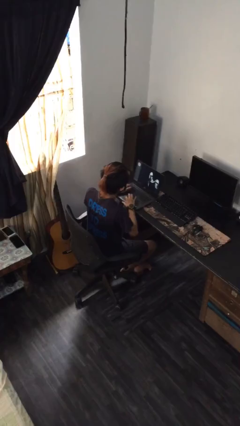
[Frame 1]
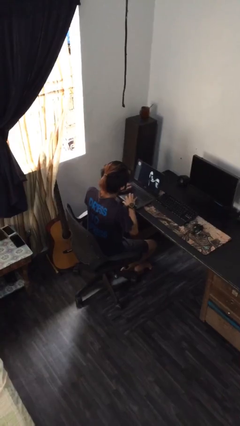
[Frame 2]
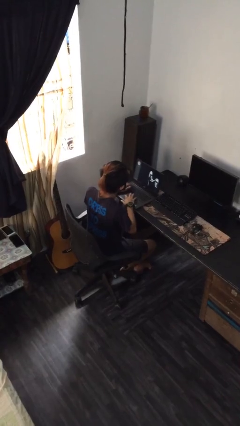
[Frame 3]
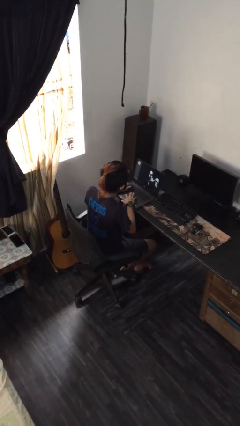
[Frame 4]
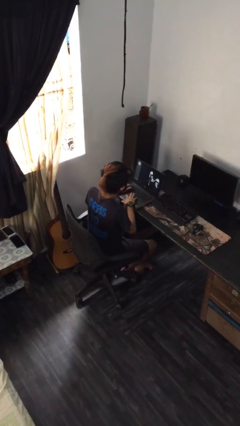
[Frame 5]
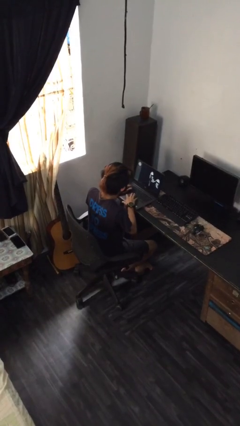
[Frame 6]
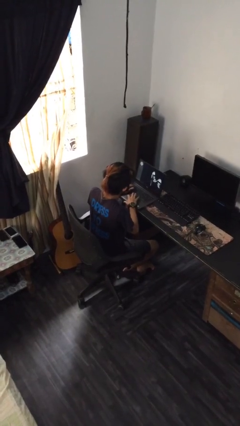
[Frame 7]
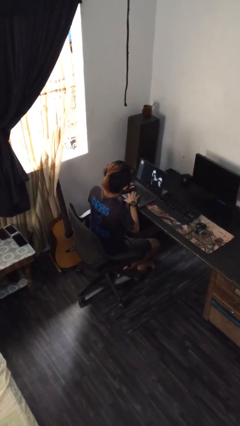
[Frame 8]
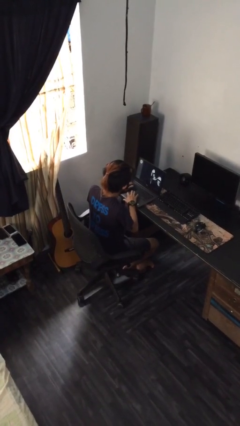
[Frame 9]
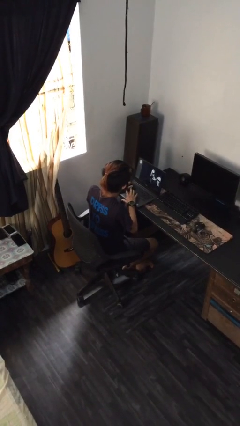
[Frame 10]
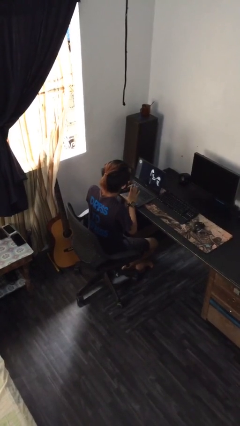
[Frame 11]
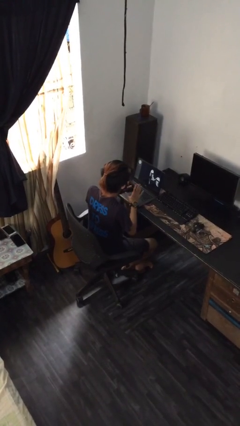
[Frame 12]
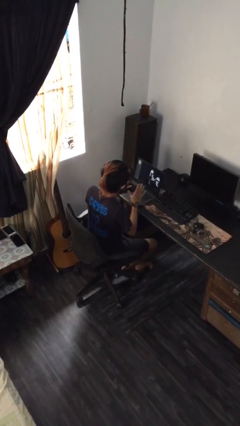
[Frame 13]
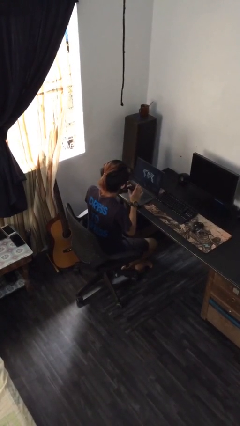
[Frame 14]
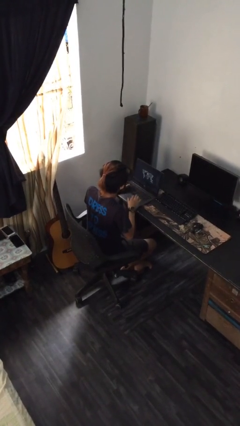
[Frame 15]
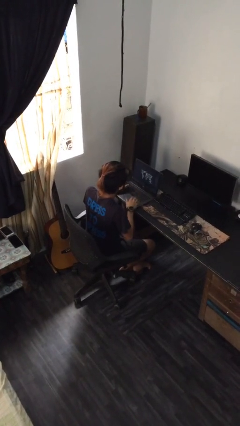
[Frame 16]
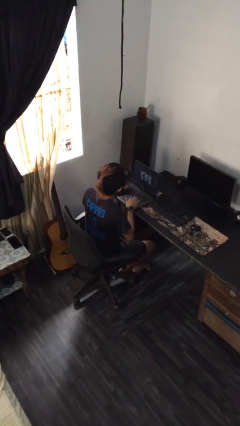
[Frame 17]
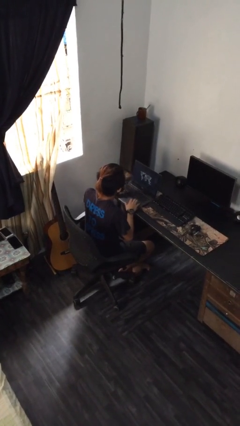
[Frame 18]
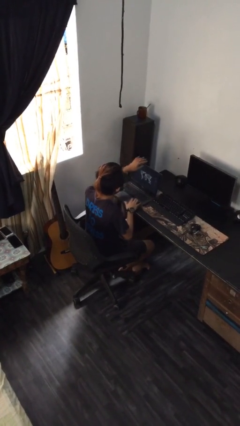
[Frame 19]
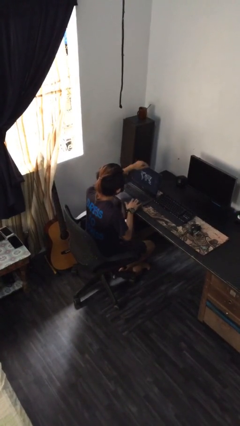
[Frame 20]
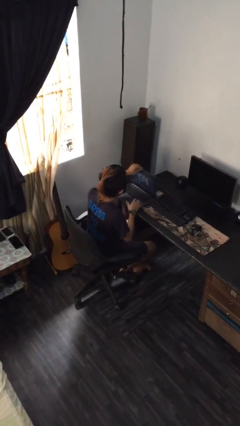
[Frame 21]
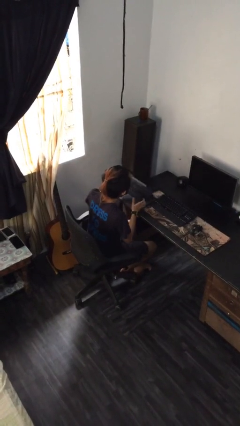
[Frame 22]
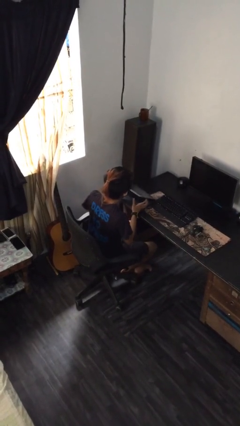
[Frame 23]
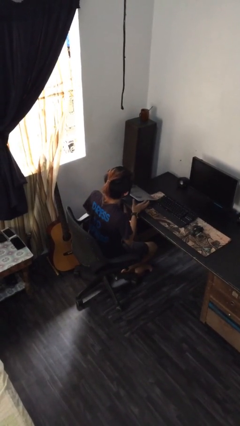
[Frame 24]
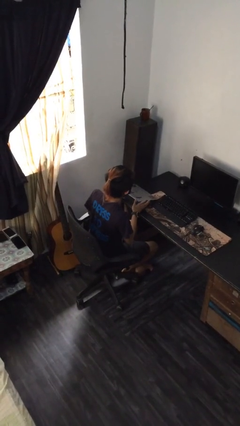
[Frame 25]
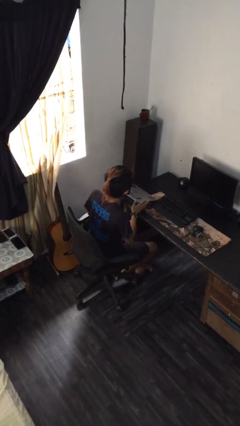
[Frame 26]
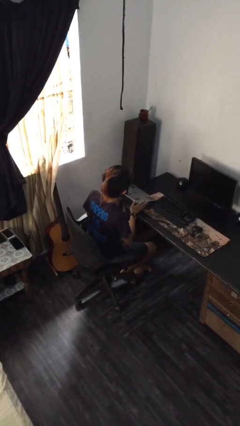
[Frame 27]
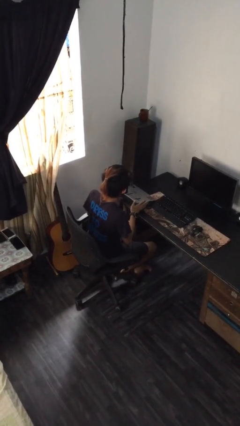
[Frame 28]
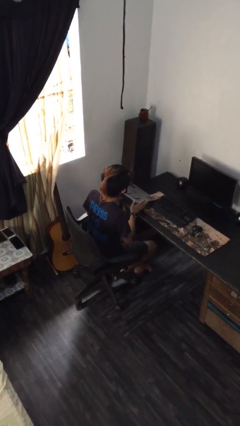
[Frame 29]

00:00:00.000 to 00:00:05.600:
person interacts with laptop

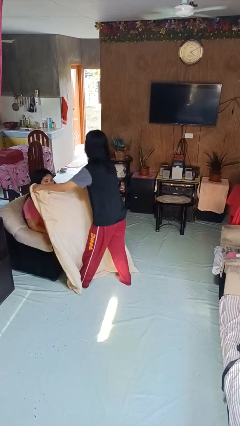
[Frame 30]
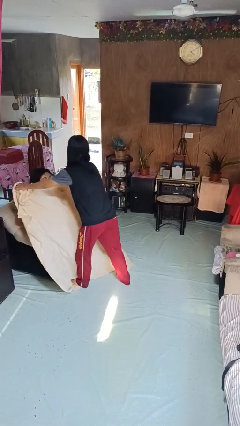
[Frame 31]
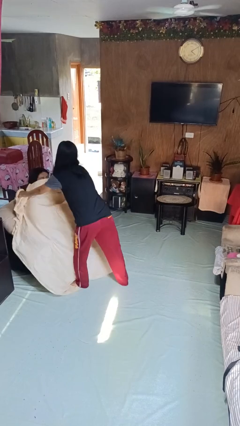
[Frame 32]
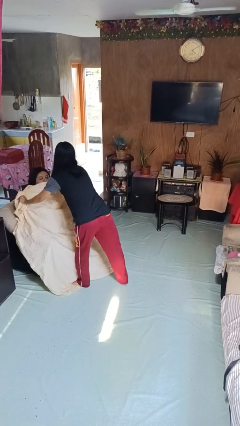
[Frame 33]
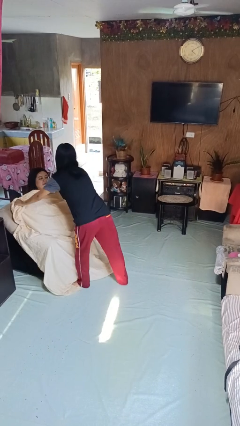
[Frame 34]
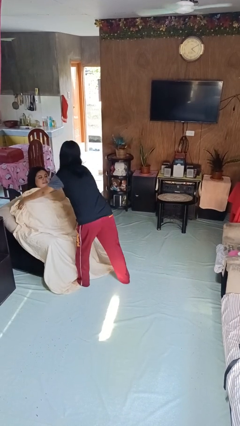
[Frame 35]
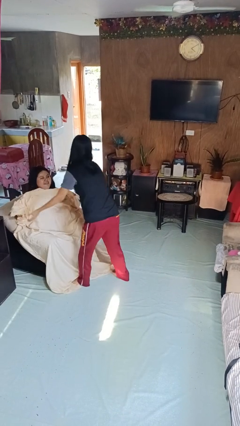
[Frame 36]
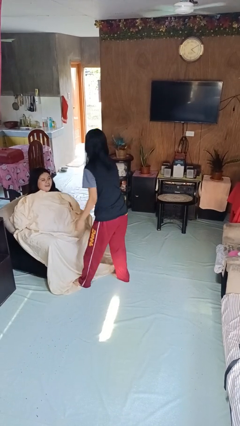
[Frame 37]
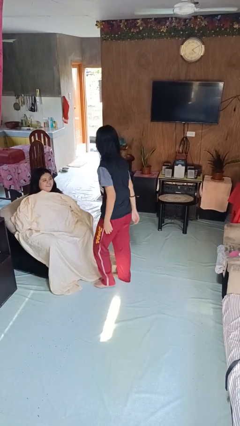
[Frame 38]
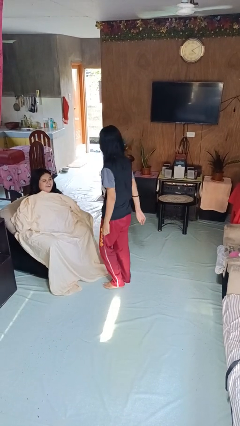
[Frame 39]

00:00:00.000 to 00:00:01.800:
person covers friend with blanket

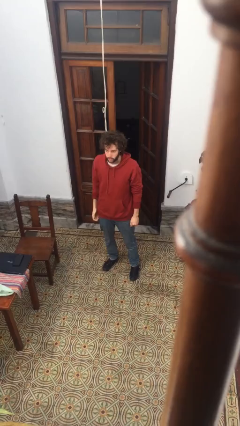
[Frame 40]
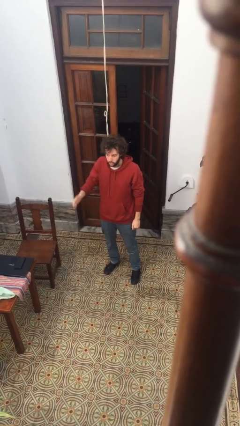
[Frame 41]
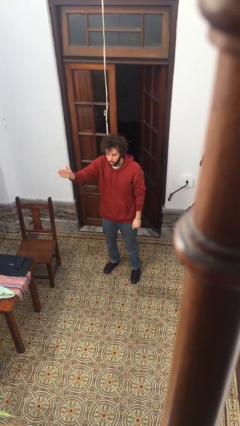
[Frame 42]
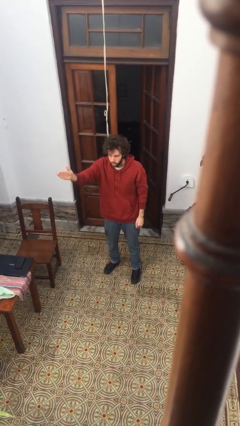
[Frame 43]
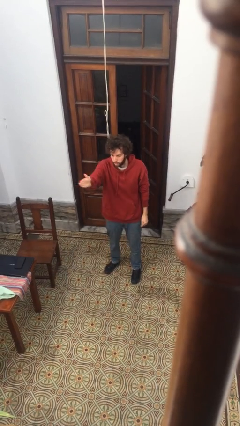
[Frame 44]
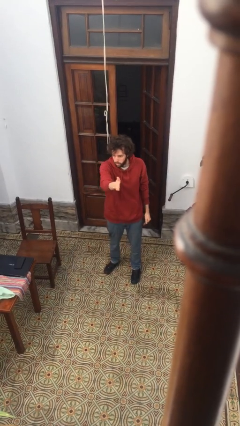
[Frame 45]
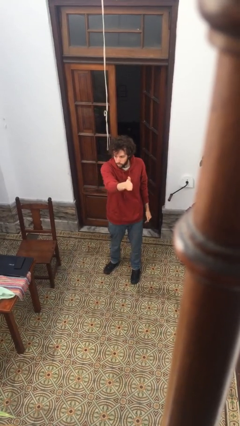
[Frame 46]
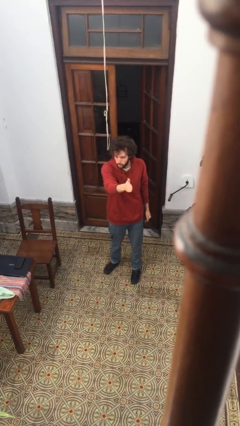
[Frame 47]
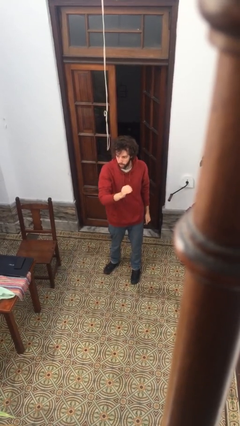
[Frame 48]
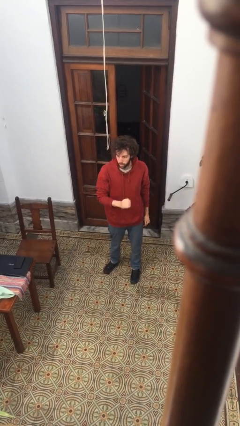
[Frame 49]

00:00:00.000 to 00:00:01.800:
person gestures swipe left

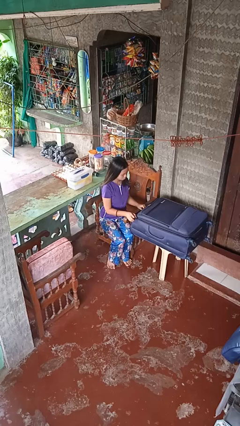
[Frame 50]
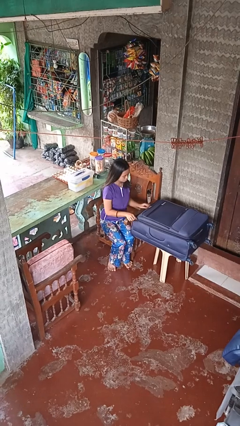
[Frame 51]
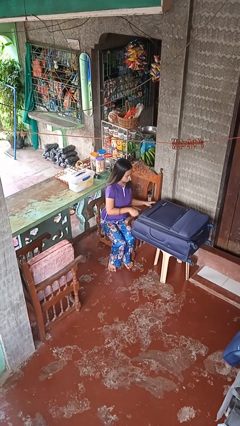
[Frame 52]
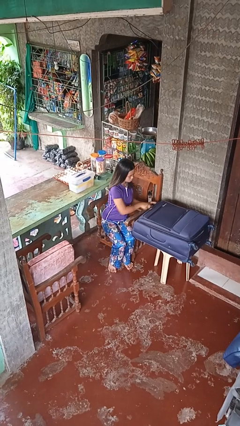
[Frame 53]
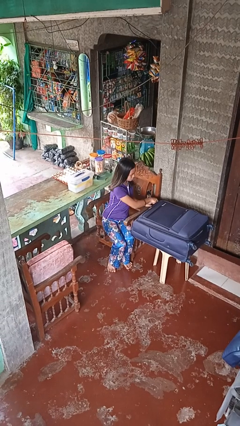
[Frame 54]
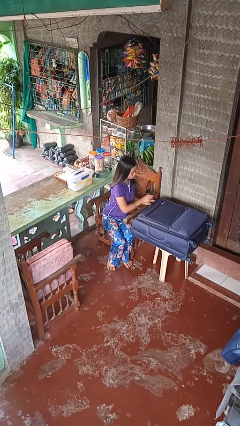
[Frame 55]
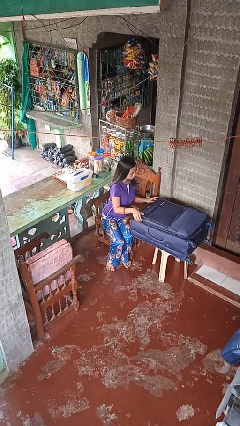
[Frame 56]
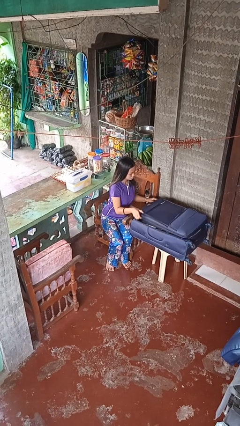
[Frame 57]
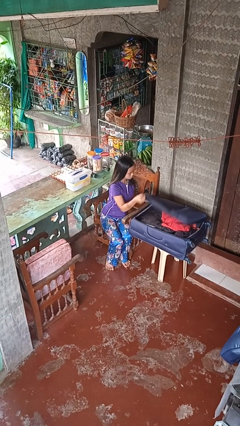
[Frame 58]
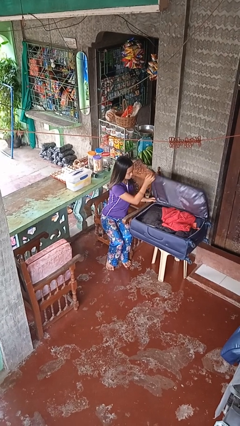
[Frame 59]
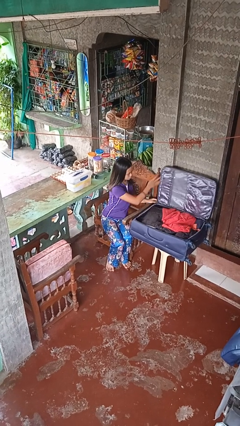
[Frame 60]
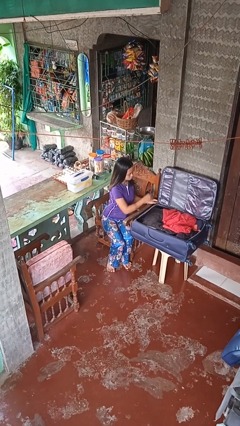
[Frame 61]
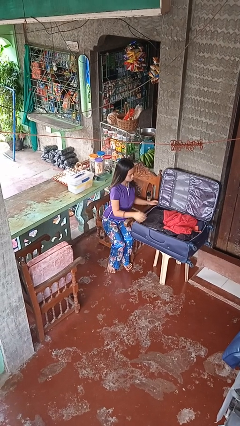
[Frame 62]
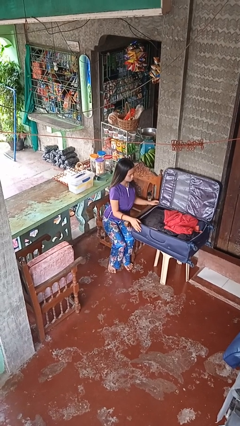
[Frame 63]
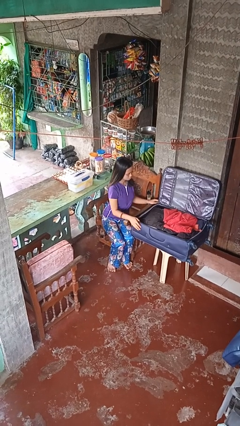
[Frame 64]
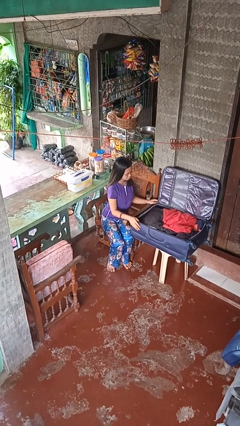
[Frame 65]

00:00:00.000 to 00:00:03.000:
person opens suitcase

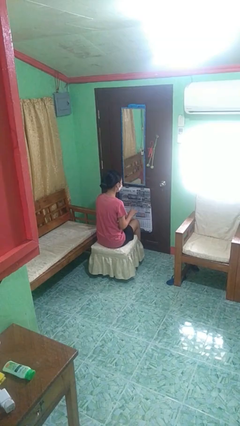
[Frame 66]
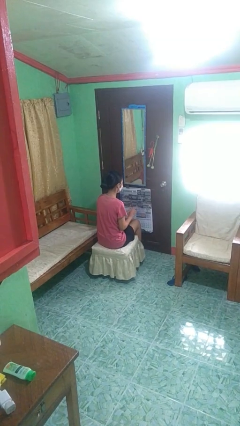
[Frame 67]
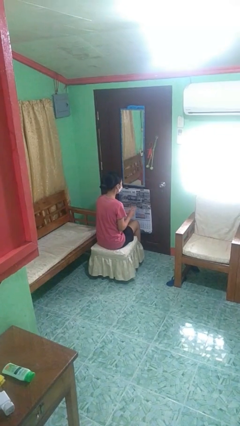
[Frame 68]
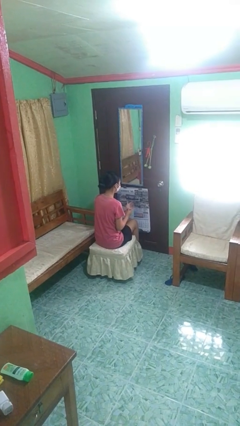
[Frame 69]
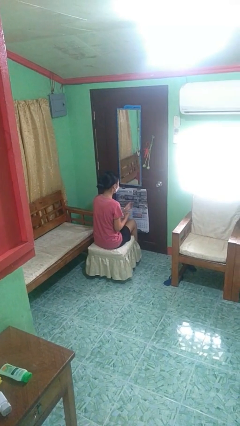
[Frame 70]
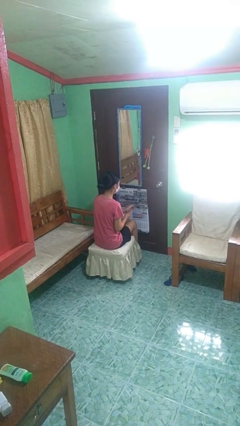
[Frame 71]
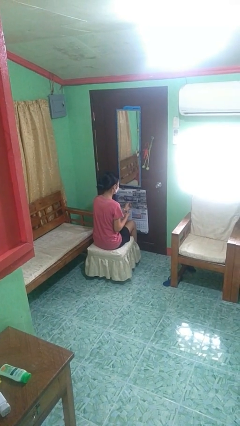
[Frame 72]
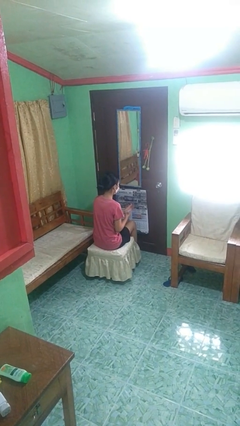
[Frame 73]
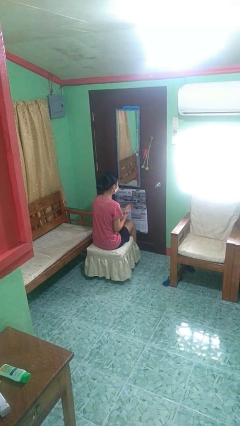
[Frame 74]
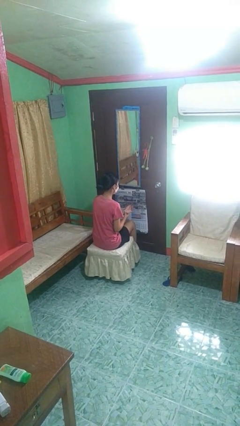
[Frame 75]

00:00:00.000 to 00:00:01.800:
person puts on wristwatch

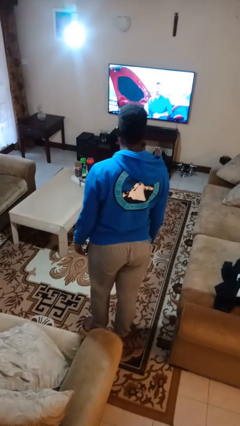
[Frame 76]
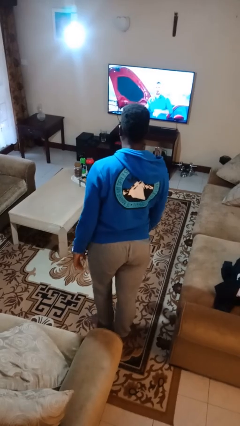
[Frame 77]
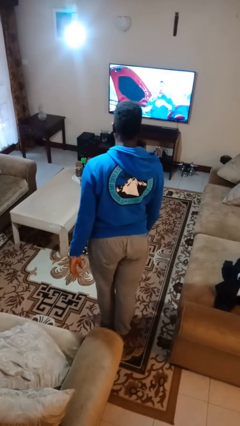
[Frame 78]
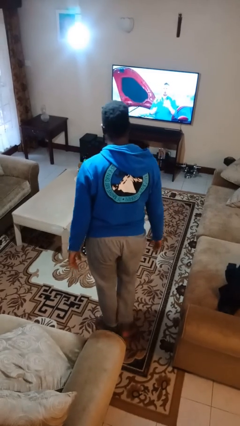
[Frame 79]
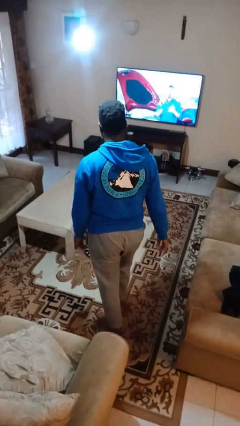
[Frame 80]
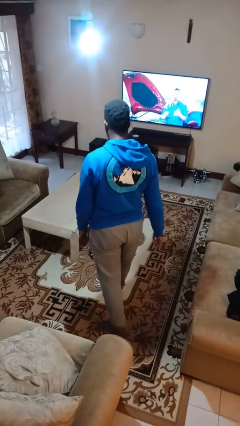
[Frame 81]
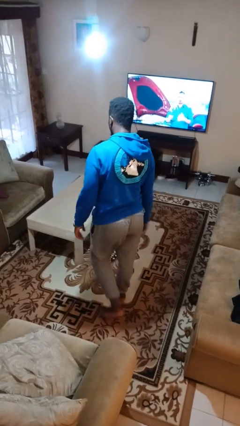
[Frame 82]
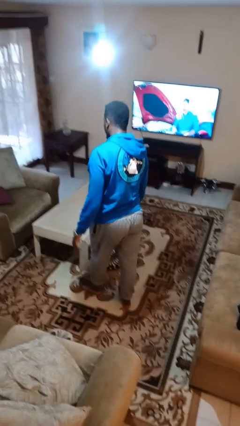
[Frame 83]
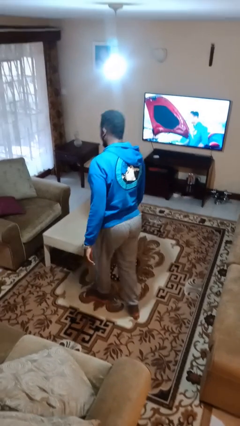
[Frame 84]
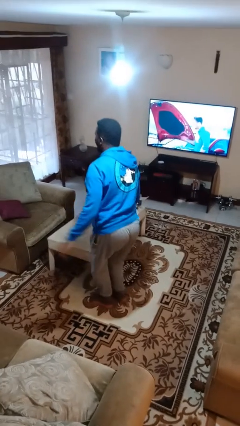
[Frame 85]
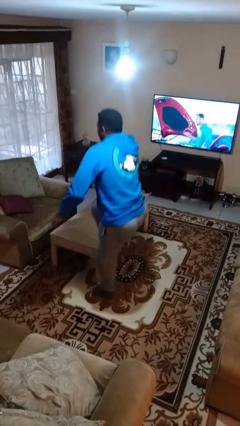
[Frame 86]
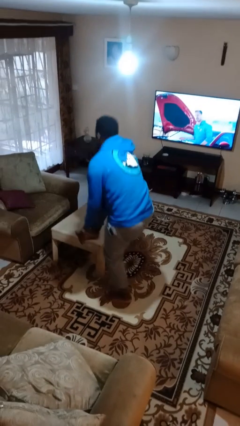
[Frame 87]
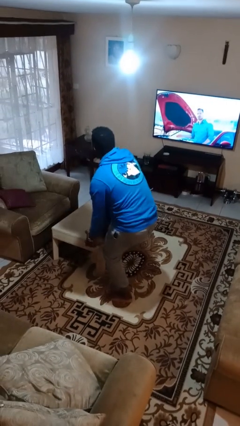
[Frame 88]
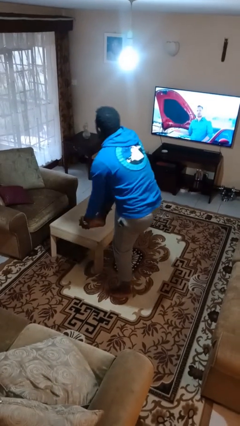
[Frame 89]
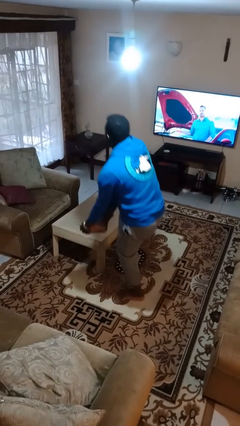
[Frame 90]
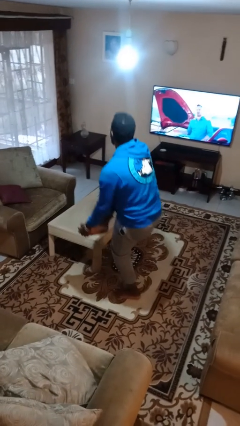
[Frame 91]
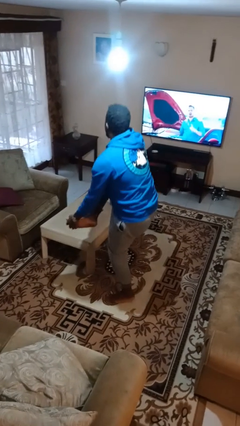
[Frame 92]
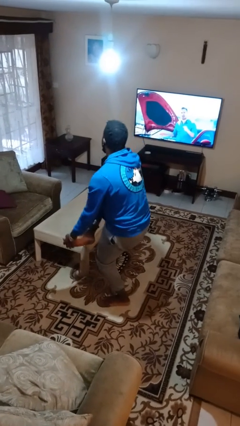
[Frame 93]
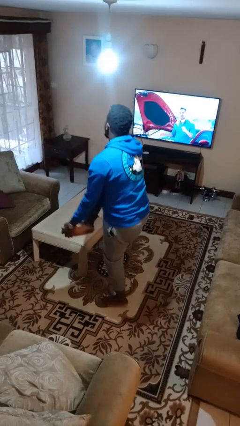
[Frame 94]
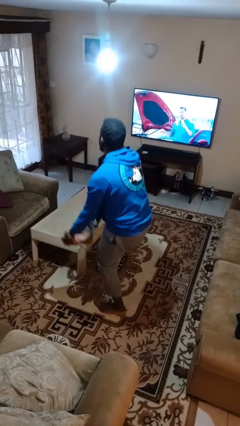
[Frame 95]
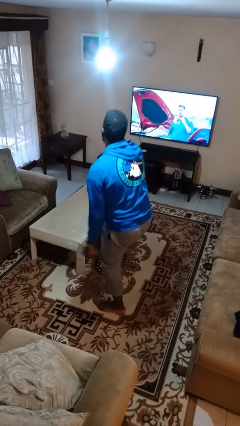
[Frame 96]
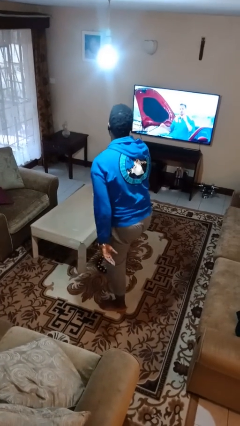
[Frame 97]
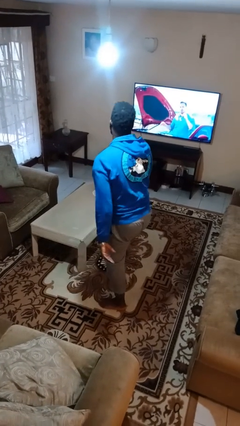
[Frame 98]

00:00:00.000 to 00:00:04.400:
person stubs toe
